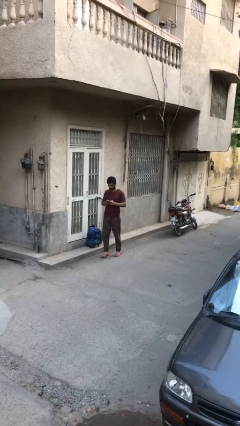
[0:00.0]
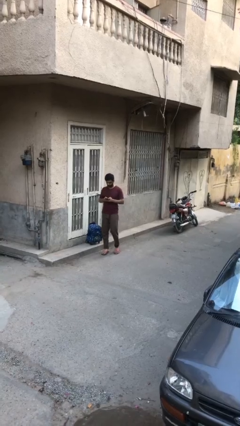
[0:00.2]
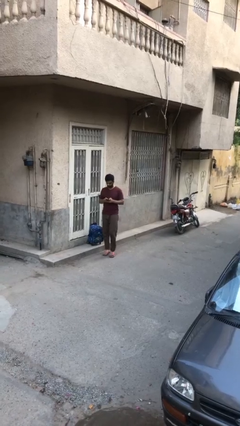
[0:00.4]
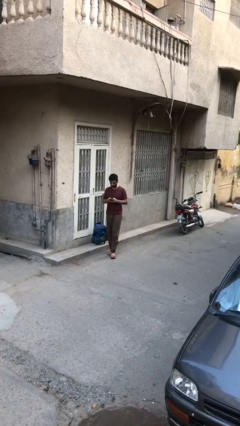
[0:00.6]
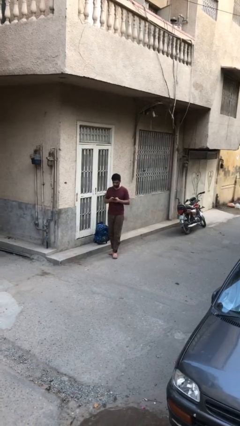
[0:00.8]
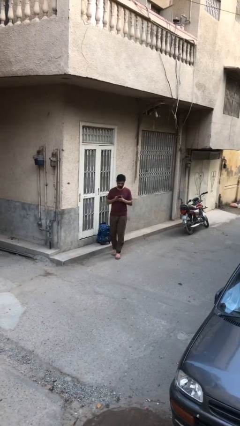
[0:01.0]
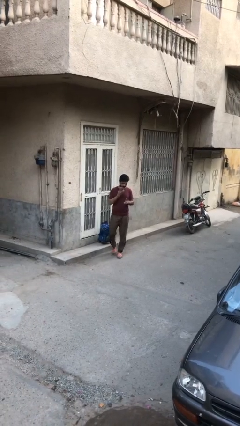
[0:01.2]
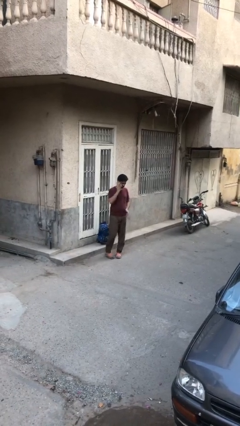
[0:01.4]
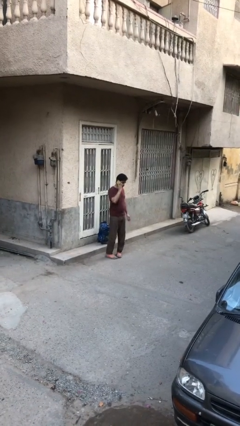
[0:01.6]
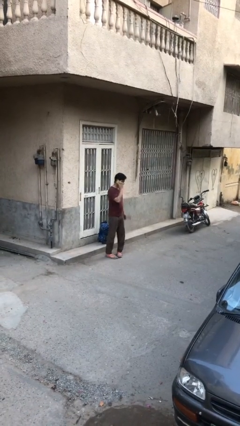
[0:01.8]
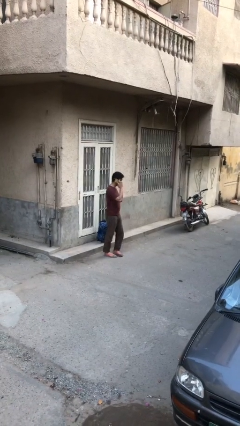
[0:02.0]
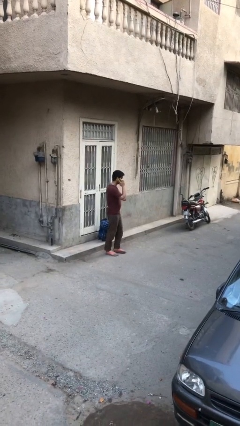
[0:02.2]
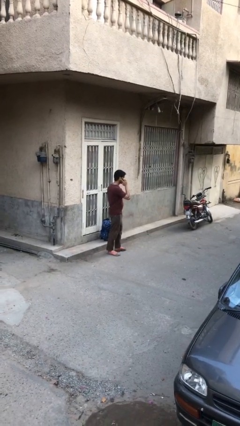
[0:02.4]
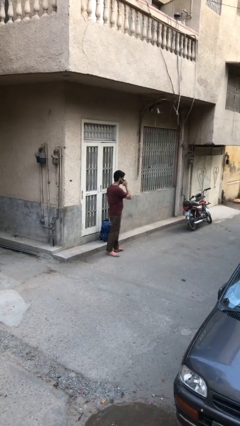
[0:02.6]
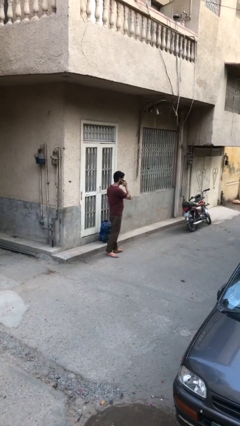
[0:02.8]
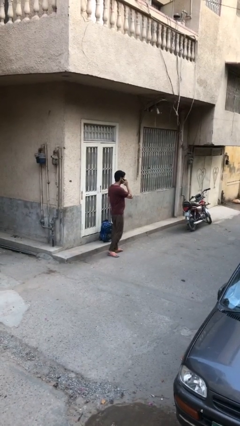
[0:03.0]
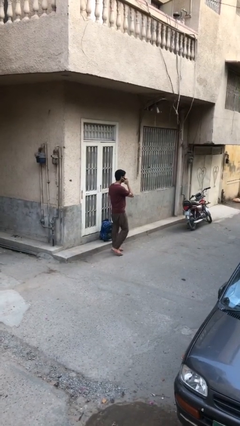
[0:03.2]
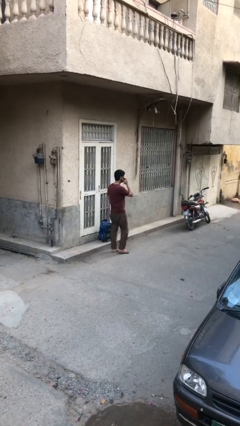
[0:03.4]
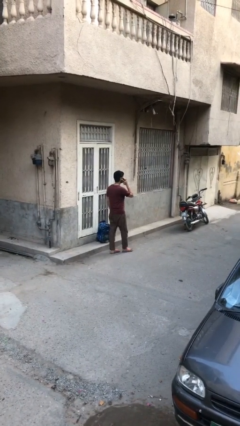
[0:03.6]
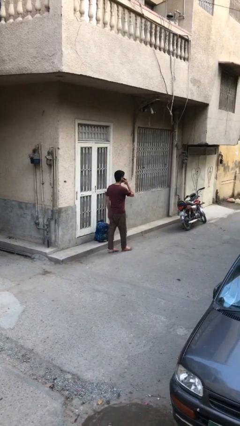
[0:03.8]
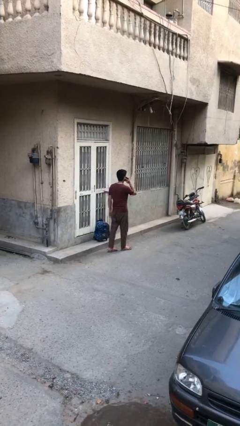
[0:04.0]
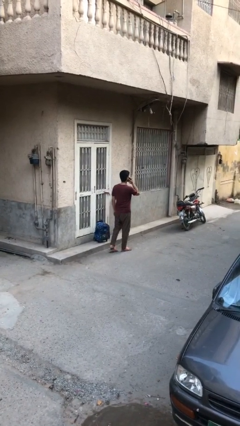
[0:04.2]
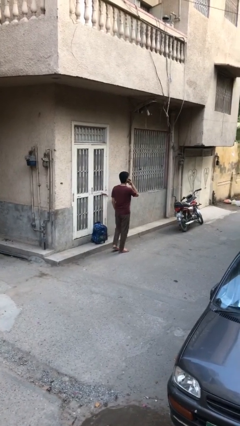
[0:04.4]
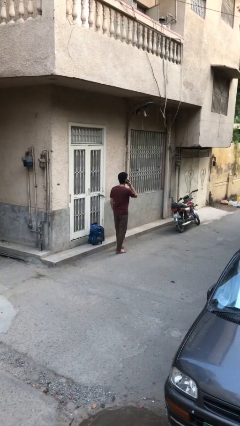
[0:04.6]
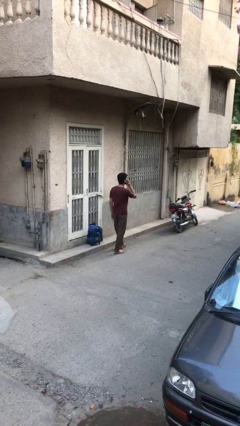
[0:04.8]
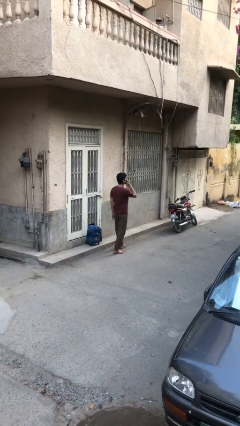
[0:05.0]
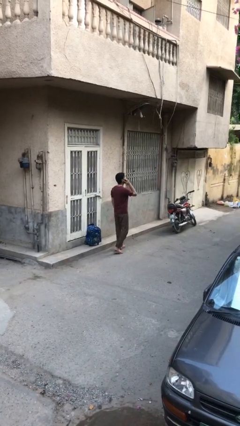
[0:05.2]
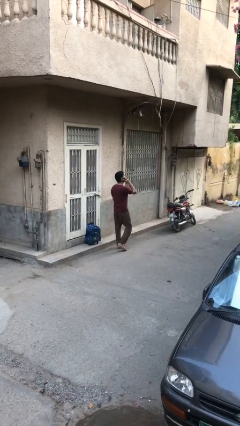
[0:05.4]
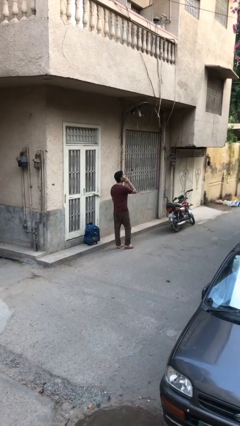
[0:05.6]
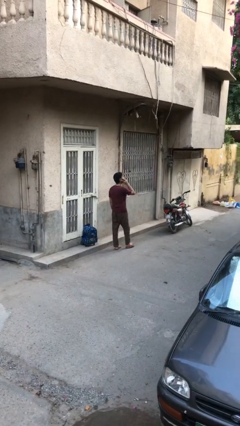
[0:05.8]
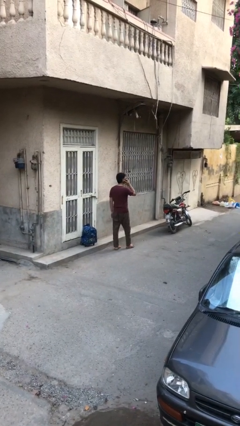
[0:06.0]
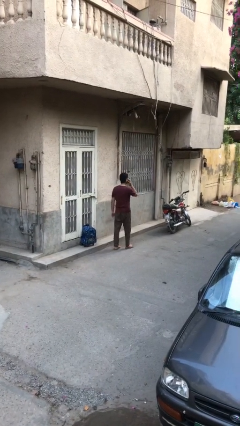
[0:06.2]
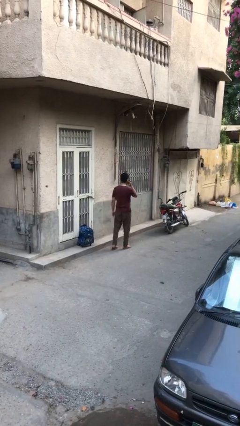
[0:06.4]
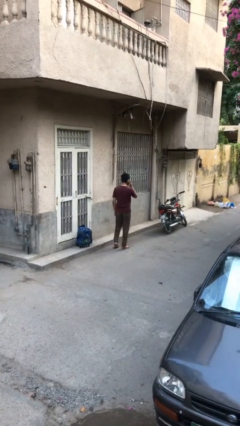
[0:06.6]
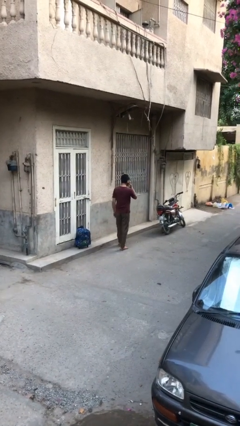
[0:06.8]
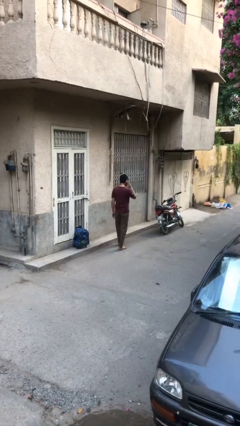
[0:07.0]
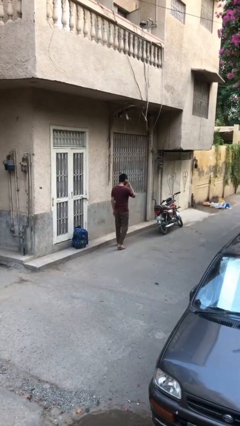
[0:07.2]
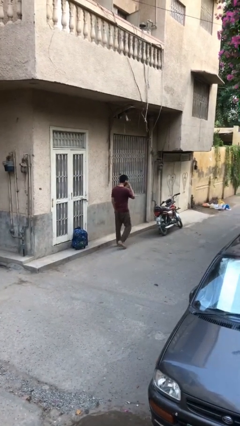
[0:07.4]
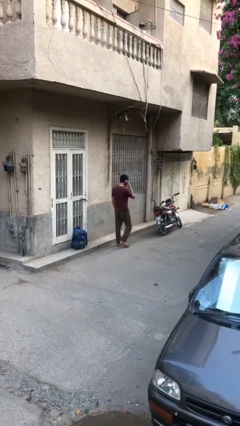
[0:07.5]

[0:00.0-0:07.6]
person talks on phone

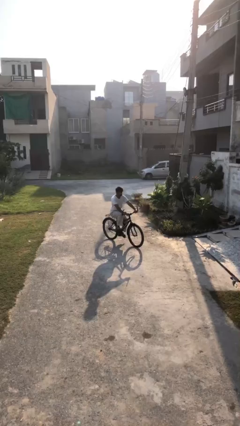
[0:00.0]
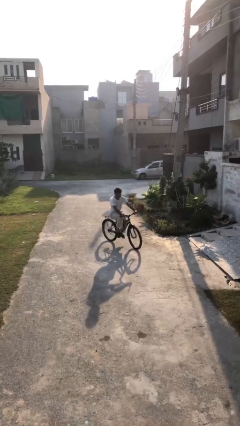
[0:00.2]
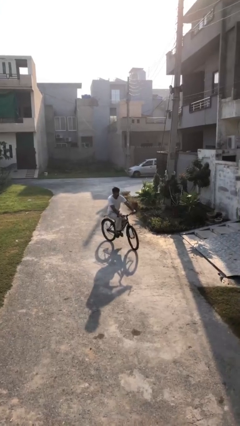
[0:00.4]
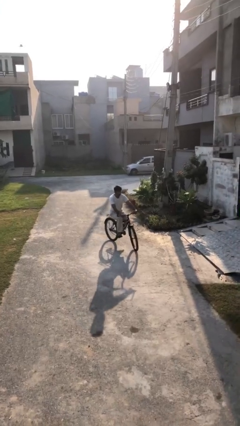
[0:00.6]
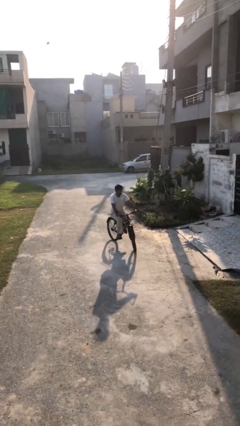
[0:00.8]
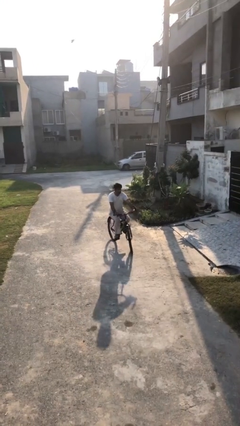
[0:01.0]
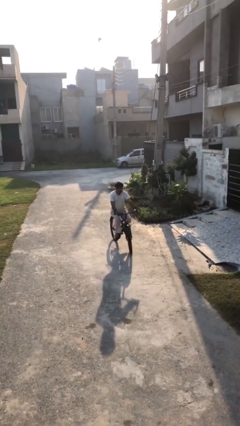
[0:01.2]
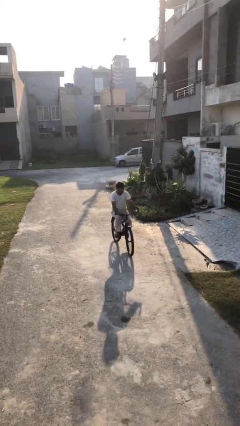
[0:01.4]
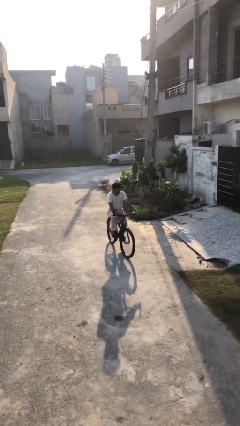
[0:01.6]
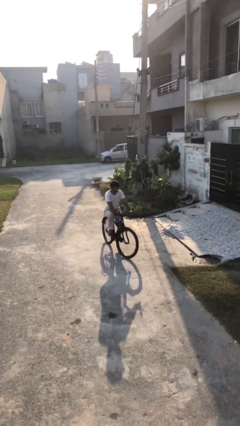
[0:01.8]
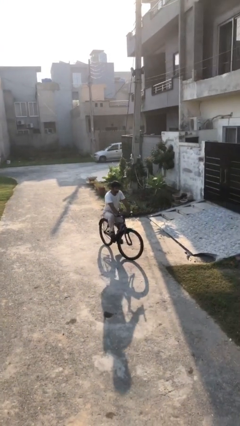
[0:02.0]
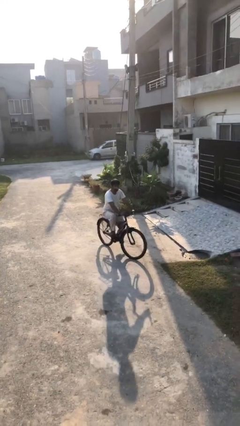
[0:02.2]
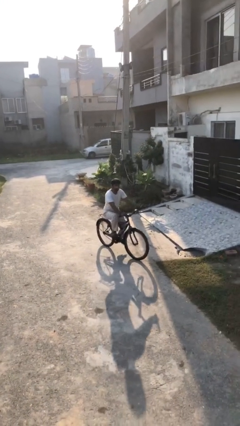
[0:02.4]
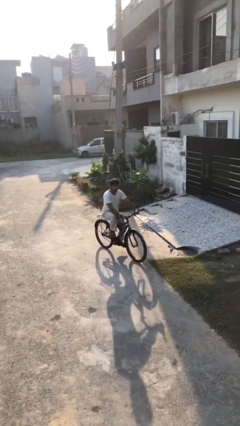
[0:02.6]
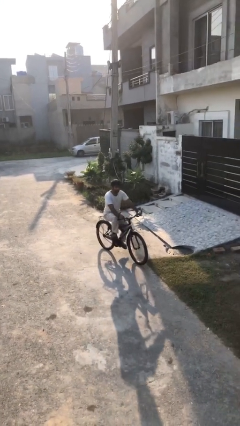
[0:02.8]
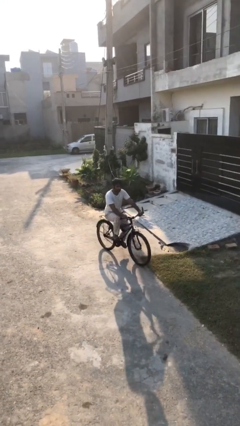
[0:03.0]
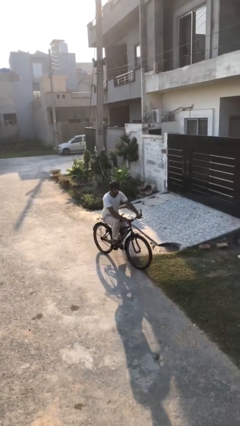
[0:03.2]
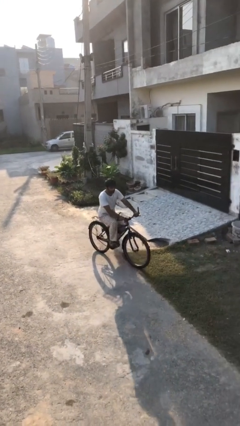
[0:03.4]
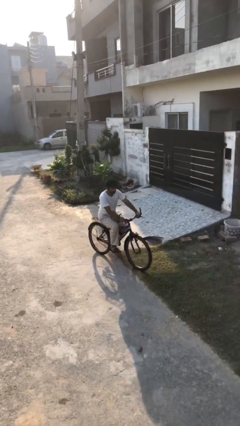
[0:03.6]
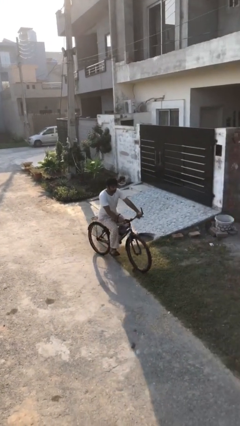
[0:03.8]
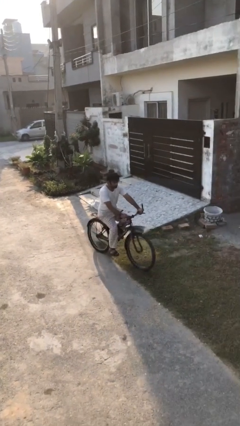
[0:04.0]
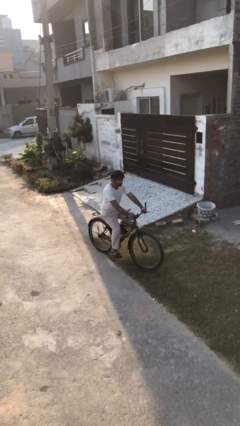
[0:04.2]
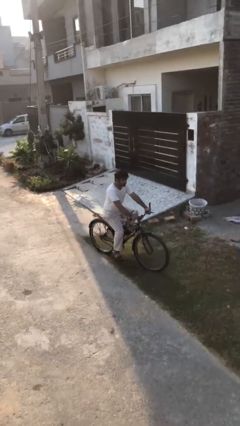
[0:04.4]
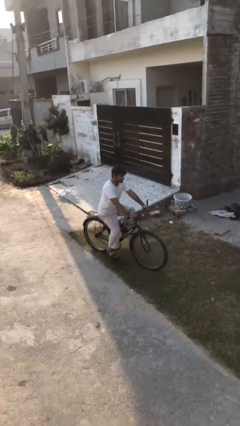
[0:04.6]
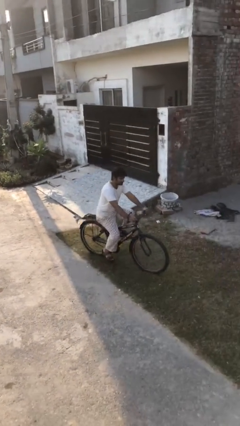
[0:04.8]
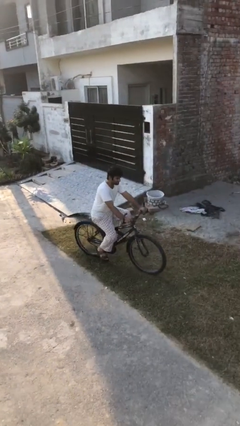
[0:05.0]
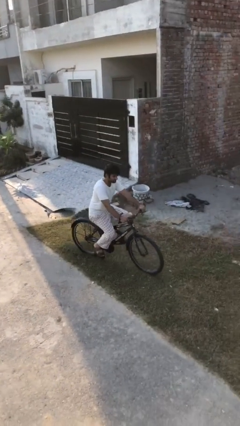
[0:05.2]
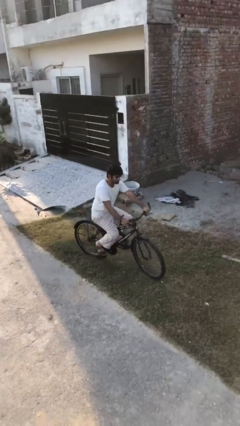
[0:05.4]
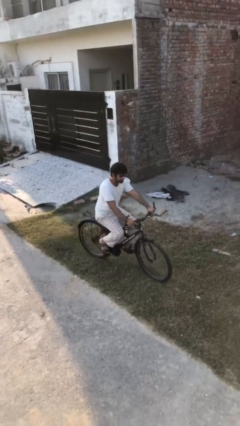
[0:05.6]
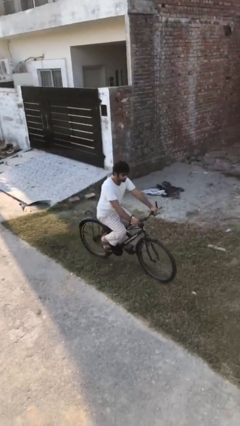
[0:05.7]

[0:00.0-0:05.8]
person rides bicycle

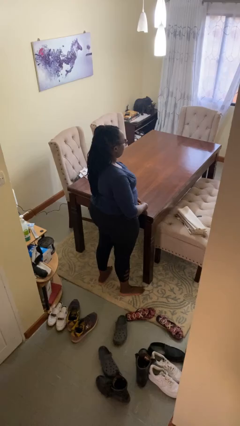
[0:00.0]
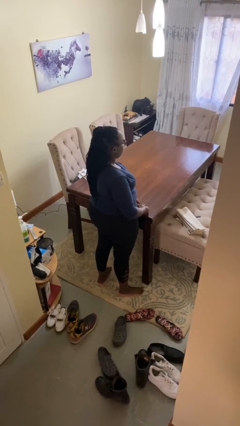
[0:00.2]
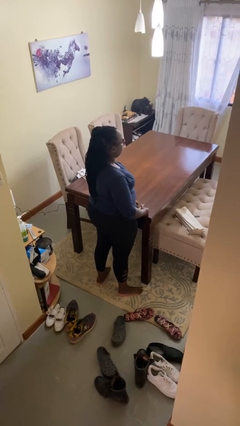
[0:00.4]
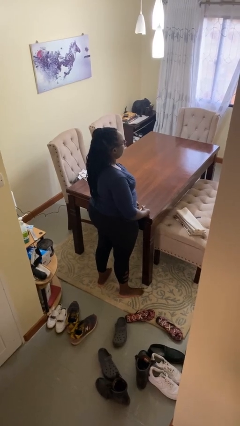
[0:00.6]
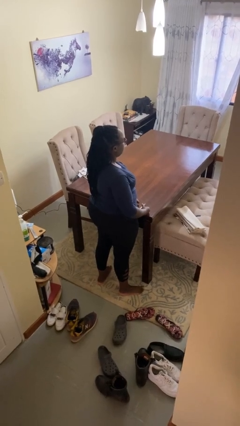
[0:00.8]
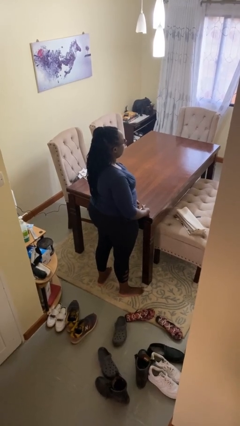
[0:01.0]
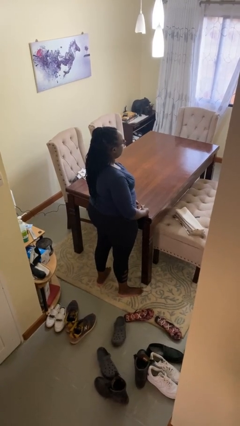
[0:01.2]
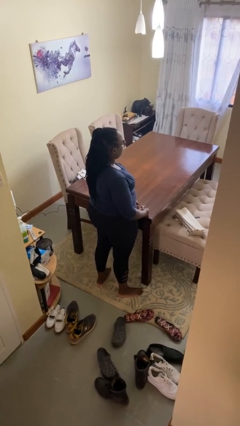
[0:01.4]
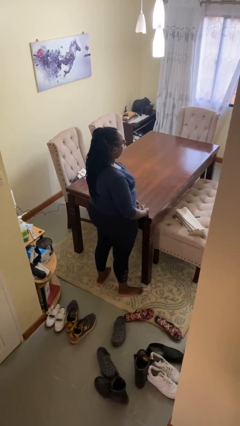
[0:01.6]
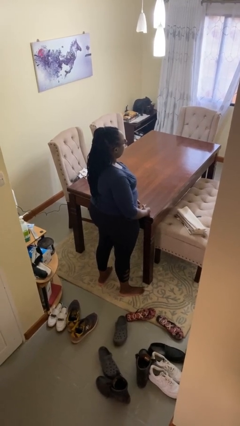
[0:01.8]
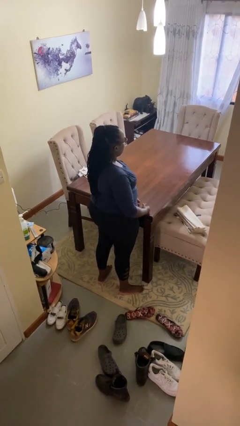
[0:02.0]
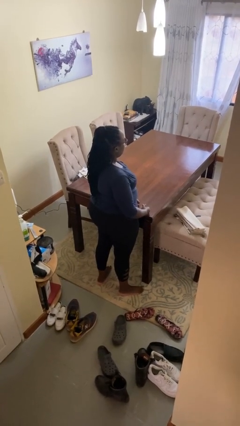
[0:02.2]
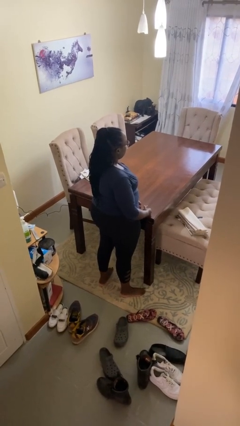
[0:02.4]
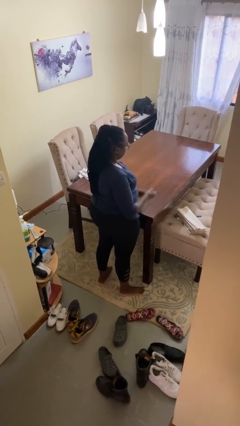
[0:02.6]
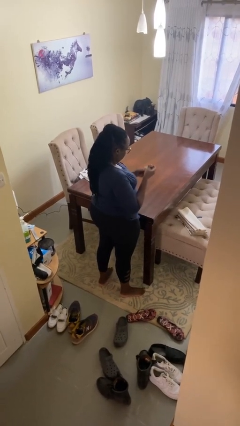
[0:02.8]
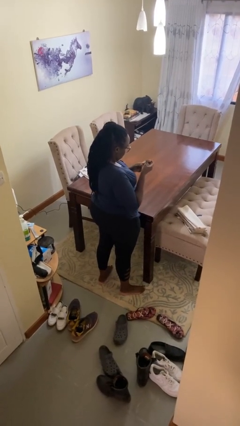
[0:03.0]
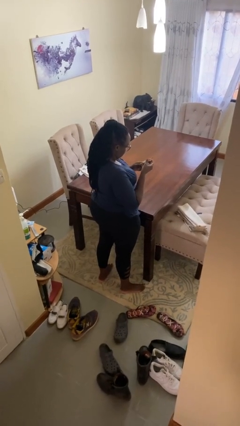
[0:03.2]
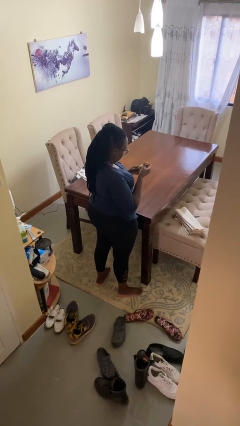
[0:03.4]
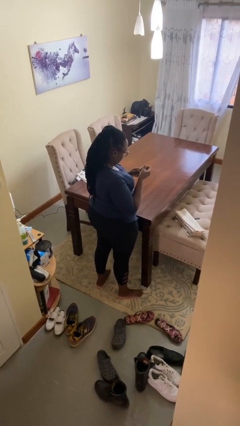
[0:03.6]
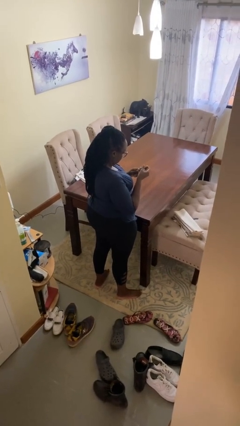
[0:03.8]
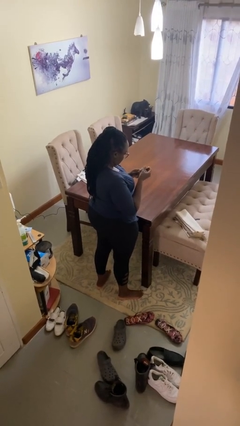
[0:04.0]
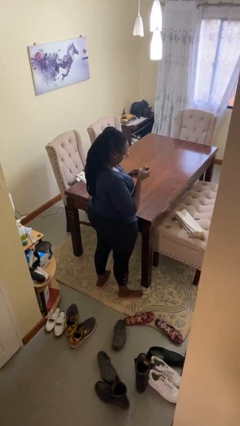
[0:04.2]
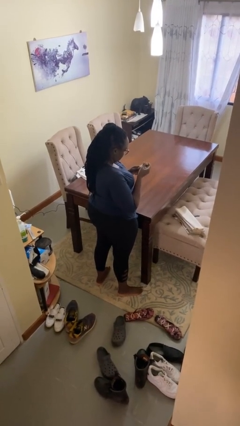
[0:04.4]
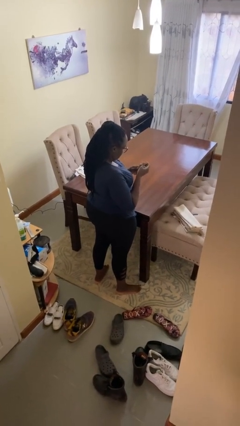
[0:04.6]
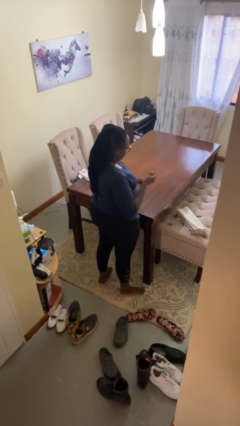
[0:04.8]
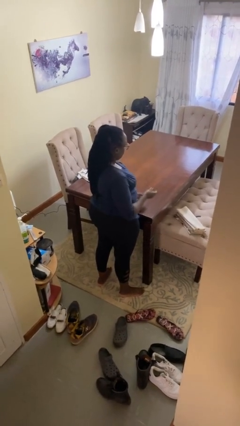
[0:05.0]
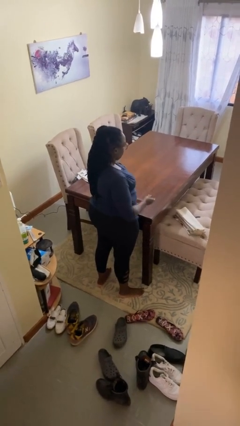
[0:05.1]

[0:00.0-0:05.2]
person clips fingernails
